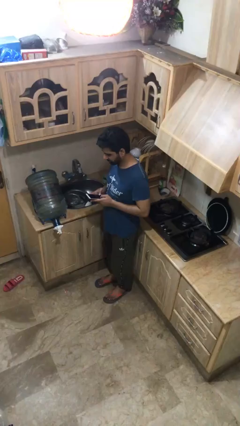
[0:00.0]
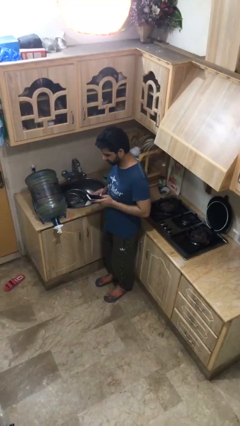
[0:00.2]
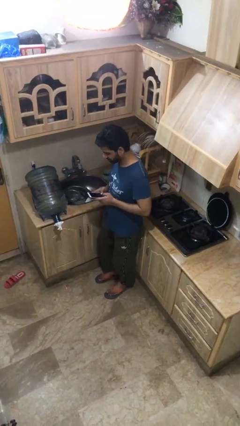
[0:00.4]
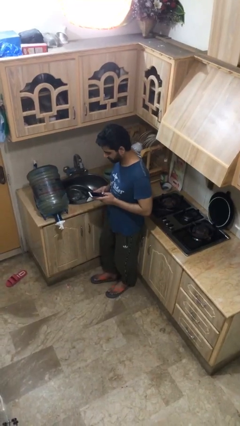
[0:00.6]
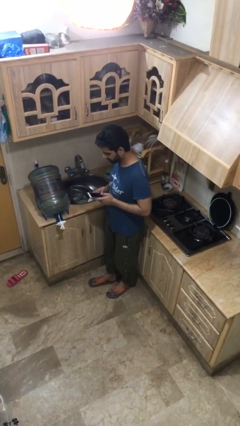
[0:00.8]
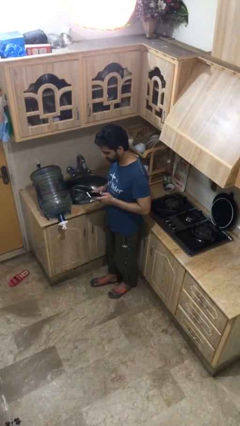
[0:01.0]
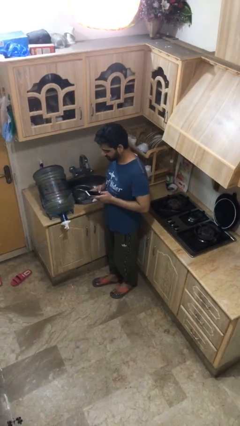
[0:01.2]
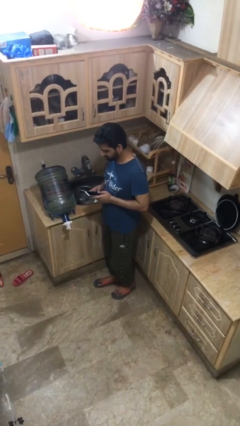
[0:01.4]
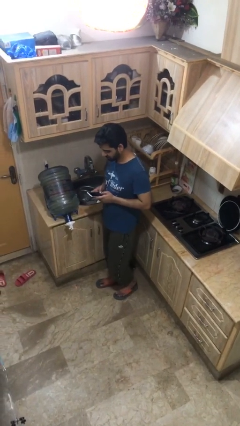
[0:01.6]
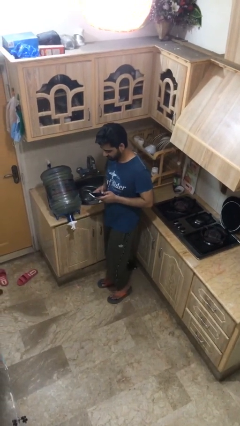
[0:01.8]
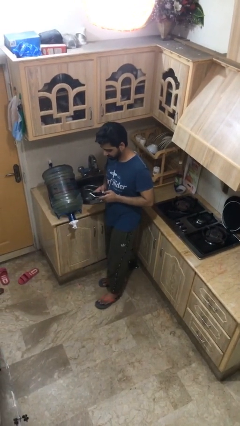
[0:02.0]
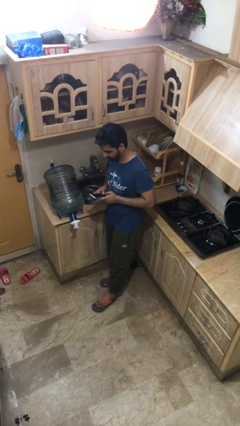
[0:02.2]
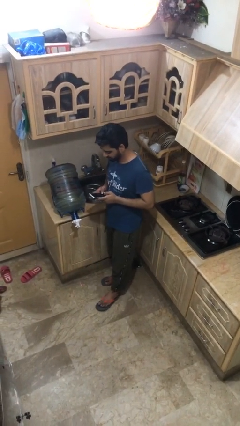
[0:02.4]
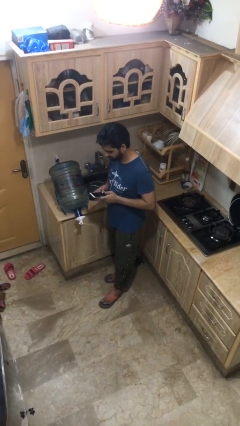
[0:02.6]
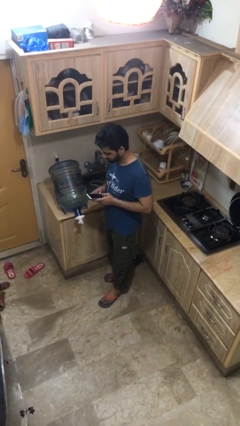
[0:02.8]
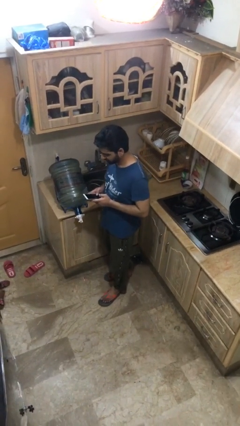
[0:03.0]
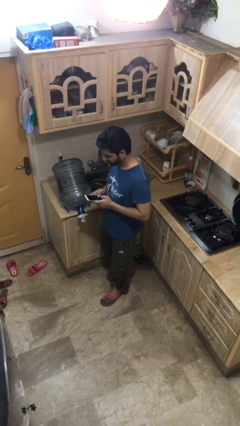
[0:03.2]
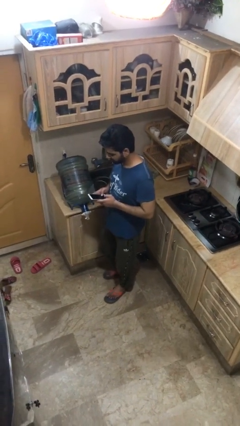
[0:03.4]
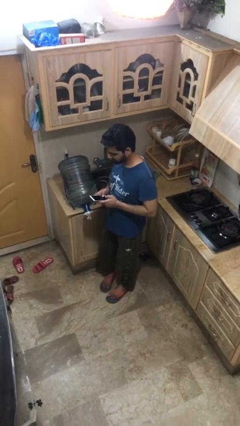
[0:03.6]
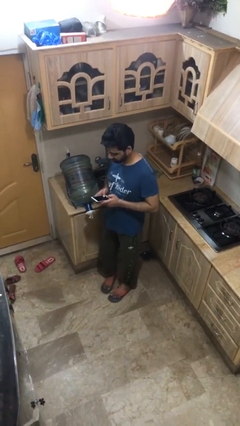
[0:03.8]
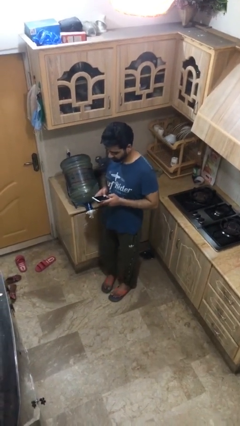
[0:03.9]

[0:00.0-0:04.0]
person texts on phone

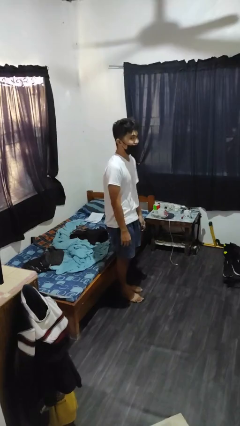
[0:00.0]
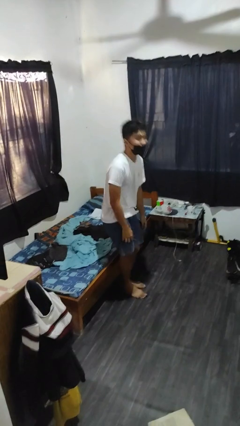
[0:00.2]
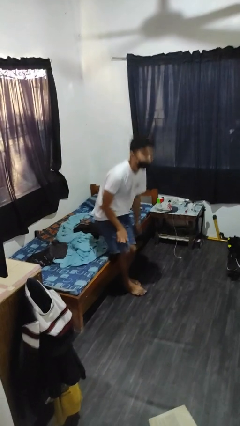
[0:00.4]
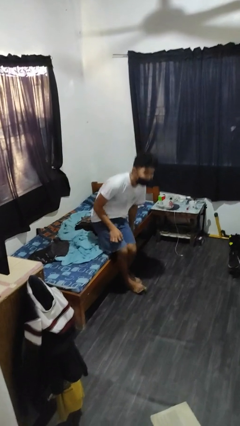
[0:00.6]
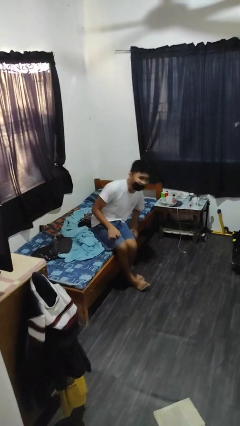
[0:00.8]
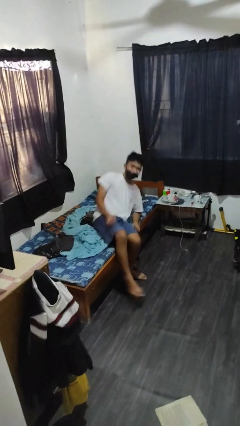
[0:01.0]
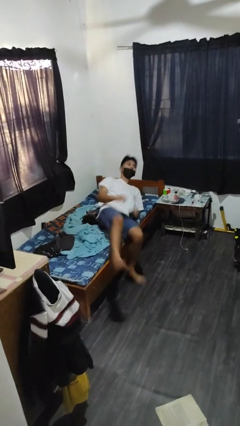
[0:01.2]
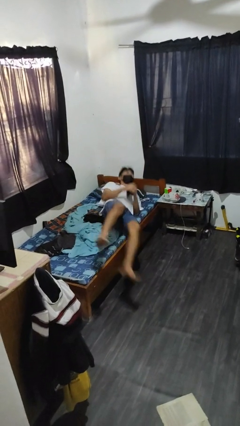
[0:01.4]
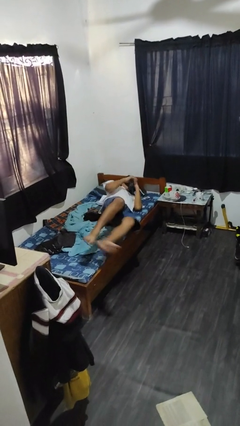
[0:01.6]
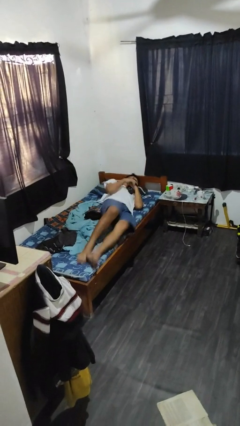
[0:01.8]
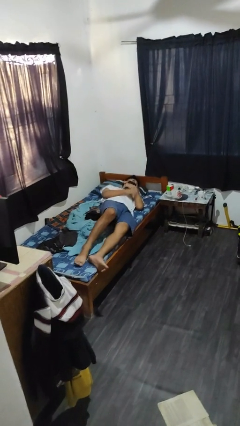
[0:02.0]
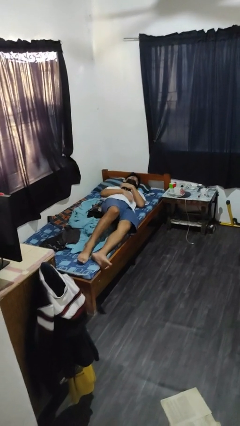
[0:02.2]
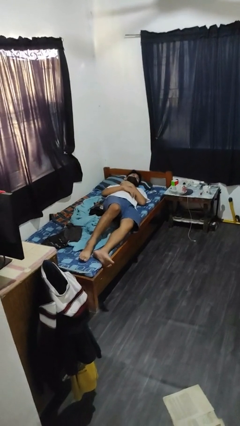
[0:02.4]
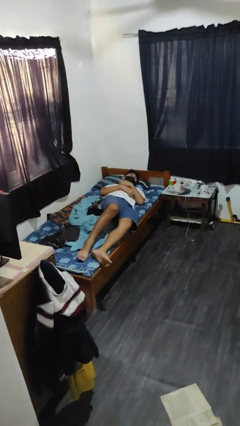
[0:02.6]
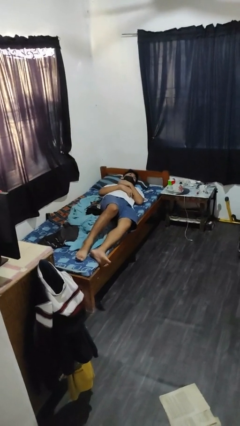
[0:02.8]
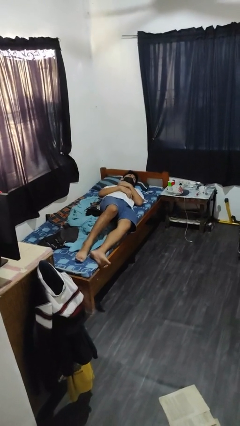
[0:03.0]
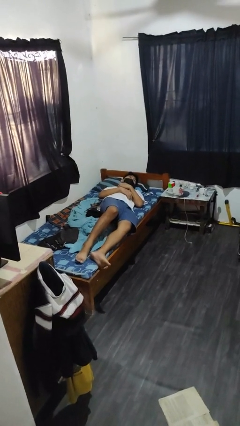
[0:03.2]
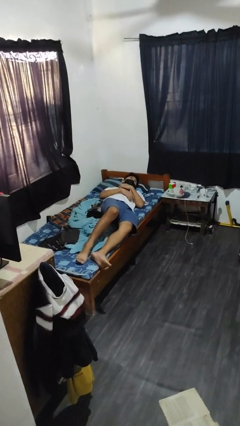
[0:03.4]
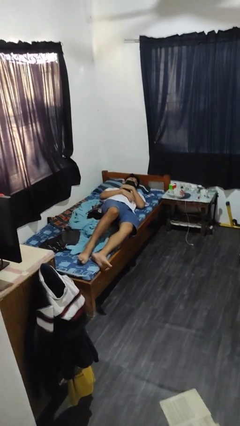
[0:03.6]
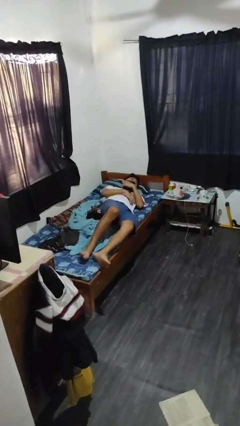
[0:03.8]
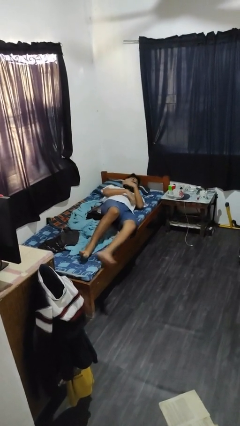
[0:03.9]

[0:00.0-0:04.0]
person lies down on bed

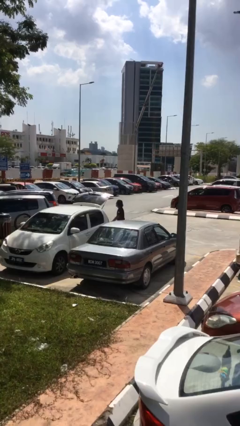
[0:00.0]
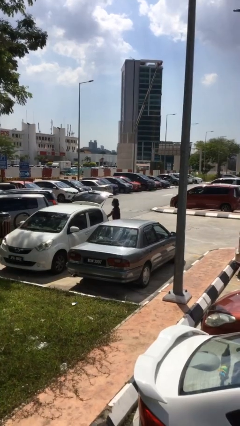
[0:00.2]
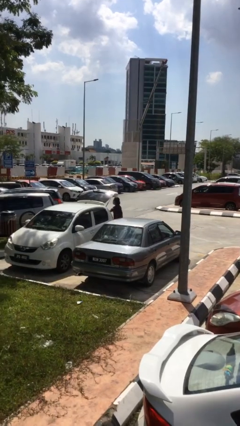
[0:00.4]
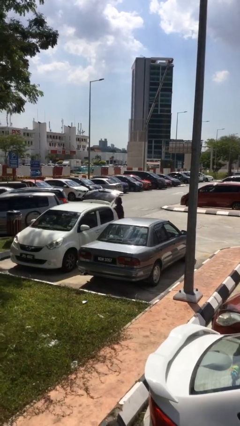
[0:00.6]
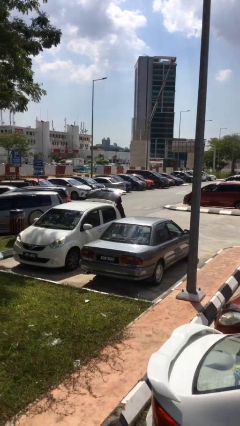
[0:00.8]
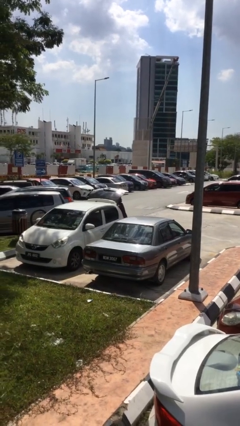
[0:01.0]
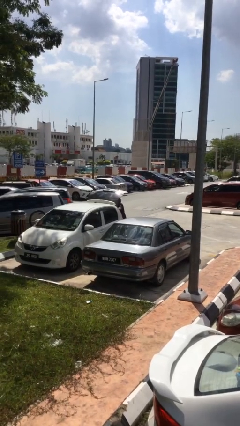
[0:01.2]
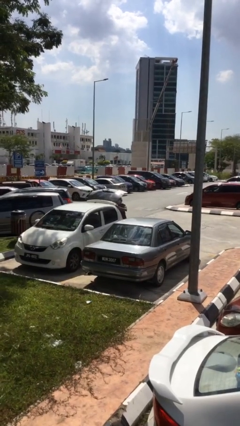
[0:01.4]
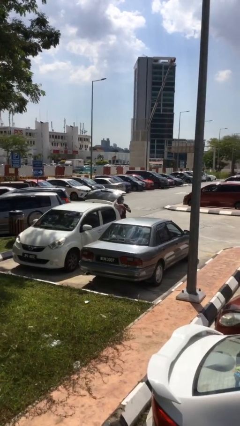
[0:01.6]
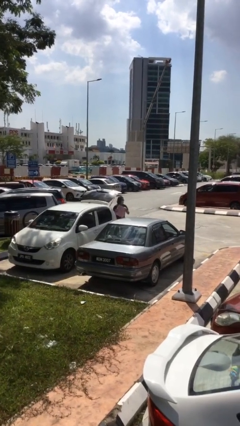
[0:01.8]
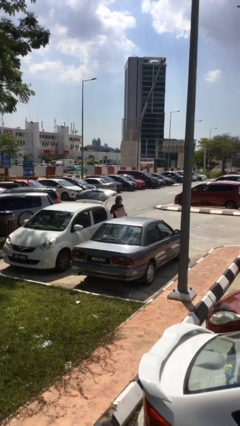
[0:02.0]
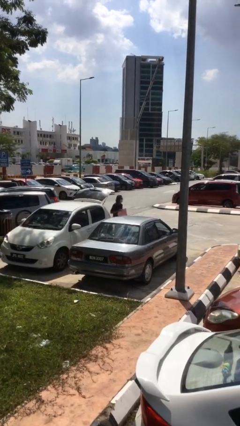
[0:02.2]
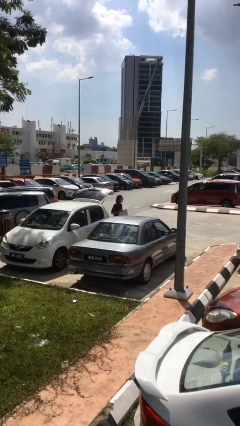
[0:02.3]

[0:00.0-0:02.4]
person unloads car

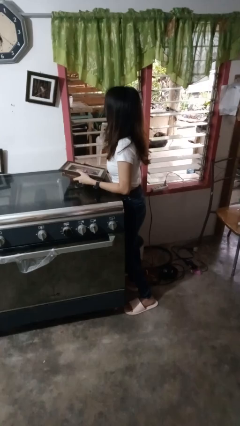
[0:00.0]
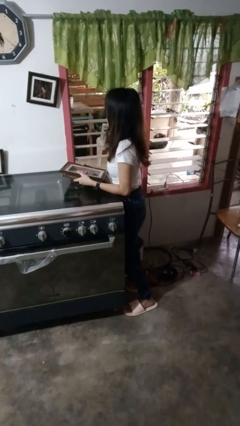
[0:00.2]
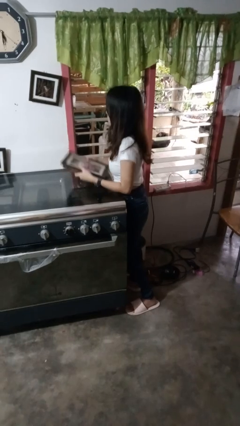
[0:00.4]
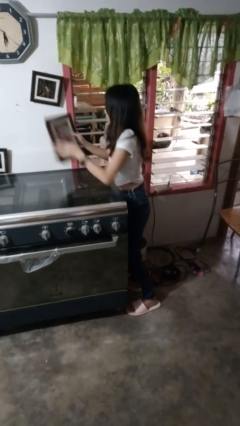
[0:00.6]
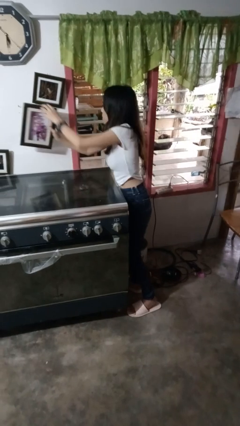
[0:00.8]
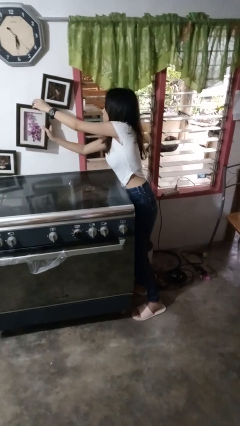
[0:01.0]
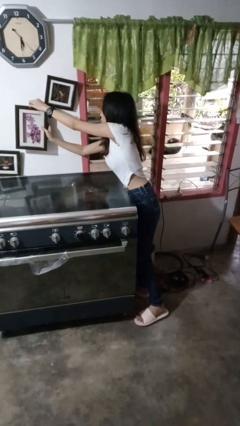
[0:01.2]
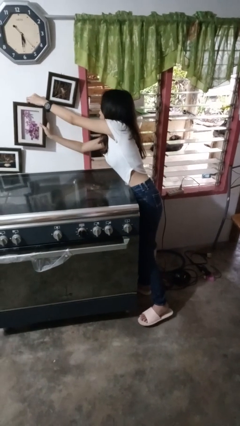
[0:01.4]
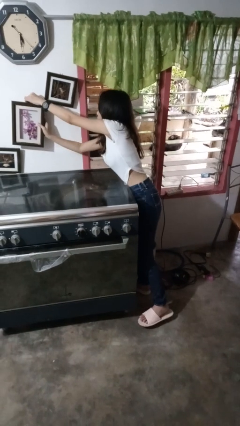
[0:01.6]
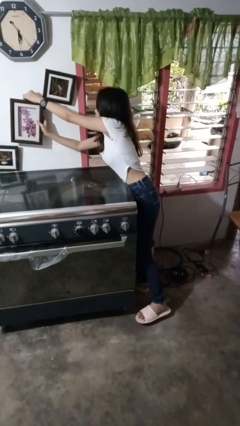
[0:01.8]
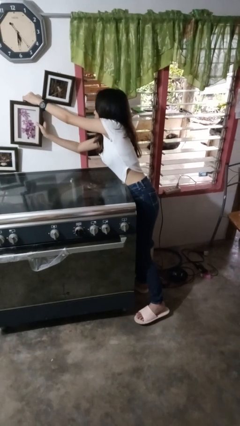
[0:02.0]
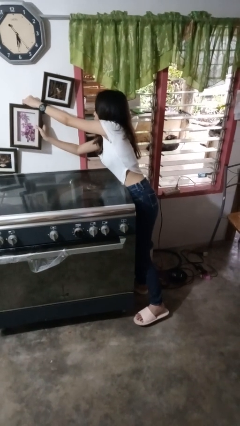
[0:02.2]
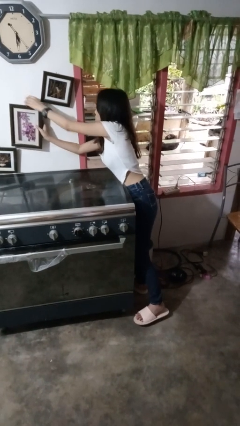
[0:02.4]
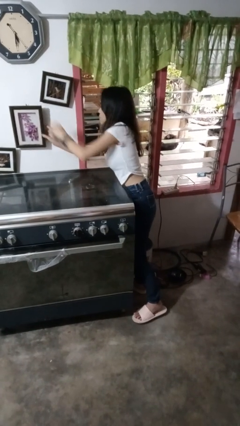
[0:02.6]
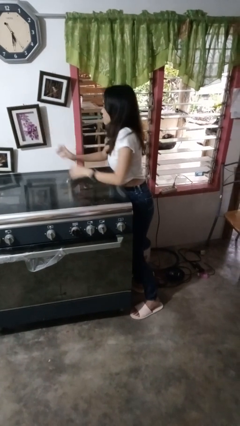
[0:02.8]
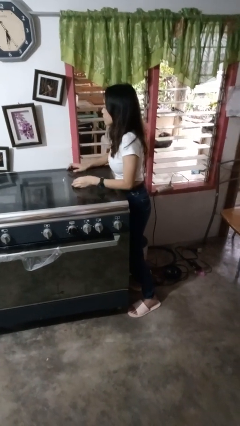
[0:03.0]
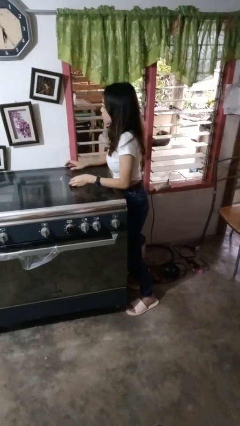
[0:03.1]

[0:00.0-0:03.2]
person puts up picture frame

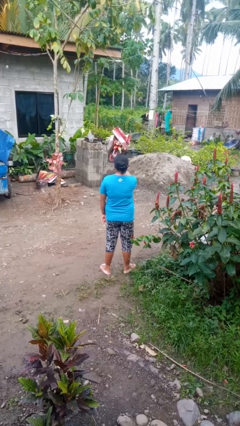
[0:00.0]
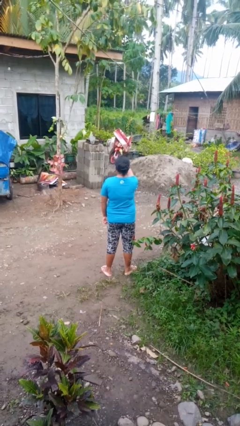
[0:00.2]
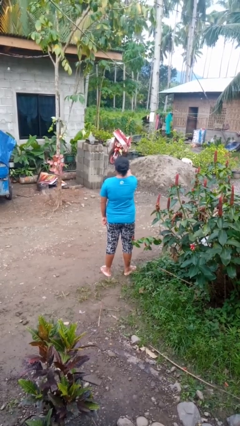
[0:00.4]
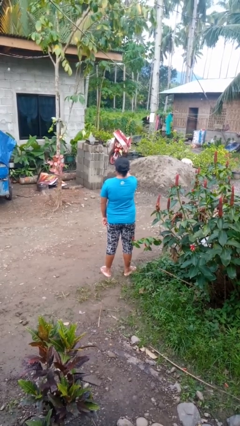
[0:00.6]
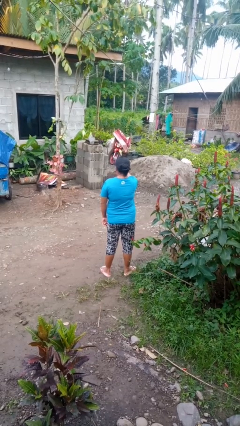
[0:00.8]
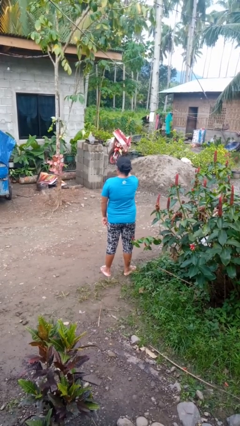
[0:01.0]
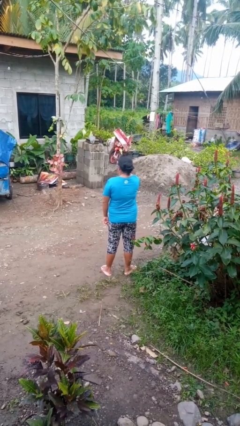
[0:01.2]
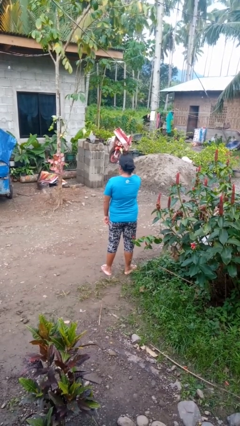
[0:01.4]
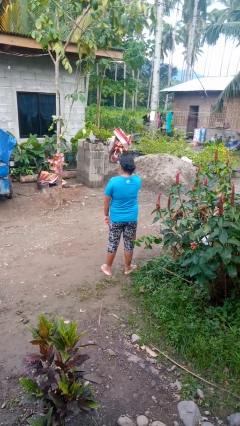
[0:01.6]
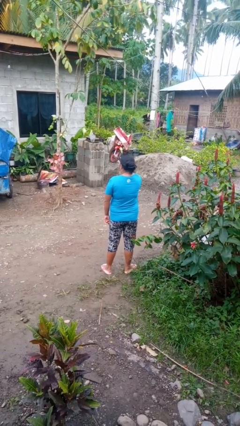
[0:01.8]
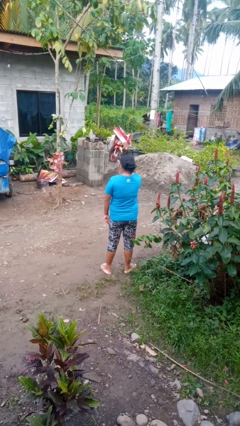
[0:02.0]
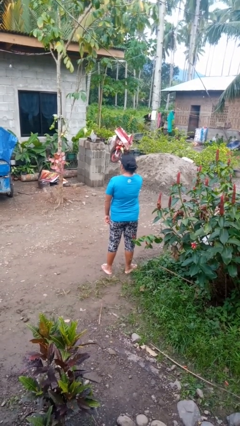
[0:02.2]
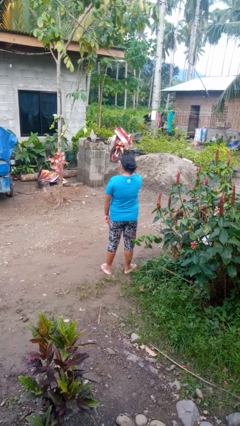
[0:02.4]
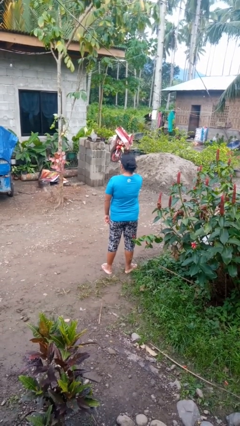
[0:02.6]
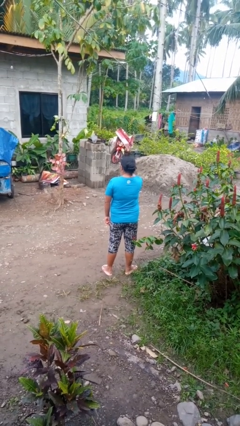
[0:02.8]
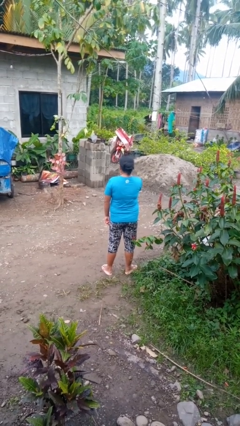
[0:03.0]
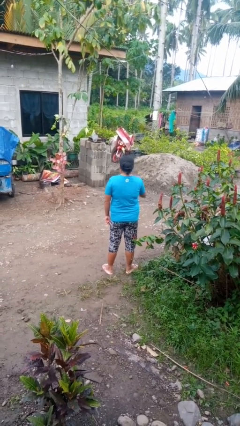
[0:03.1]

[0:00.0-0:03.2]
person points at person

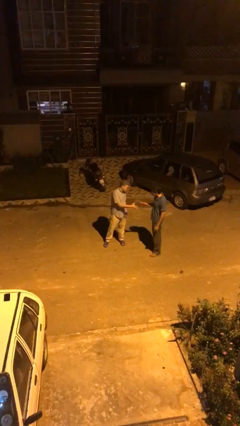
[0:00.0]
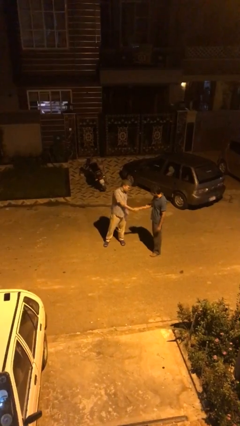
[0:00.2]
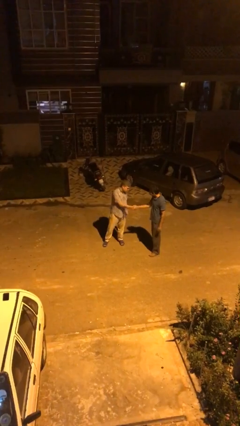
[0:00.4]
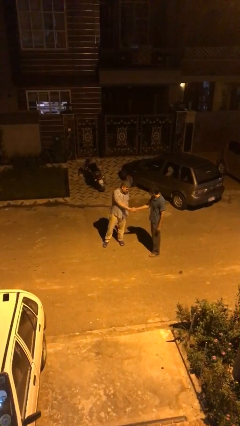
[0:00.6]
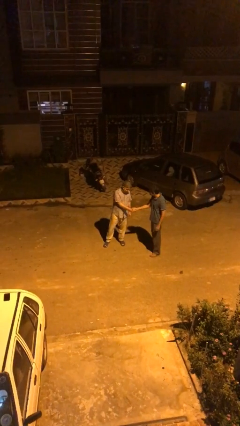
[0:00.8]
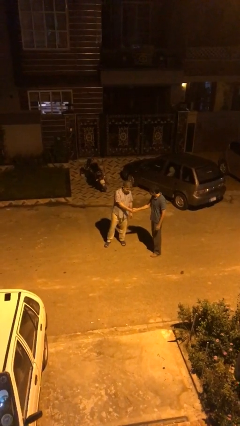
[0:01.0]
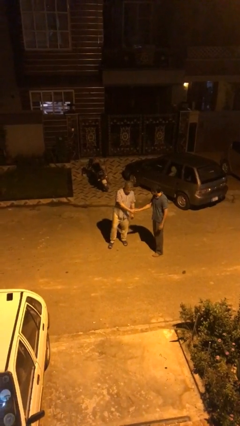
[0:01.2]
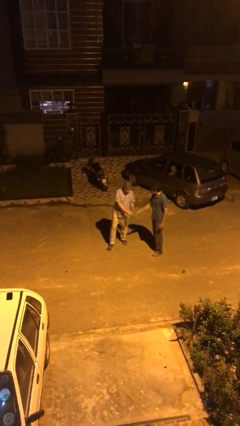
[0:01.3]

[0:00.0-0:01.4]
person shakes hand
